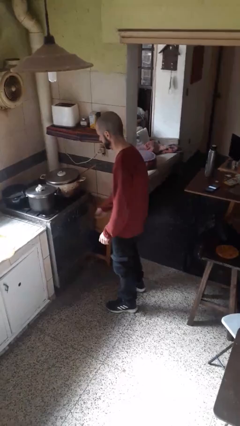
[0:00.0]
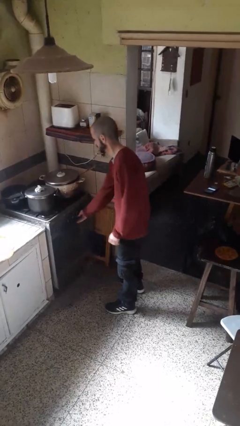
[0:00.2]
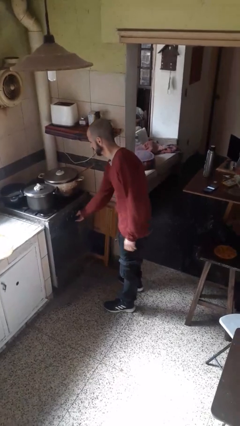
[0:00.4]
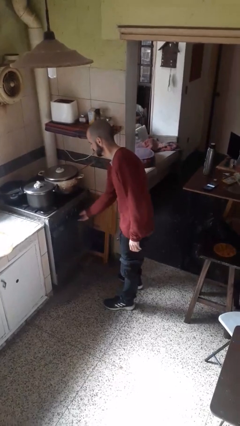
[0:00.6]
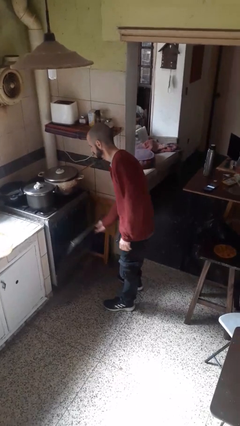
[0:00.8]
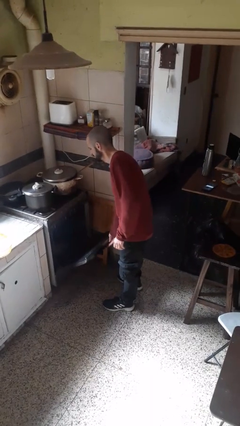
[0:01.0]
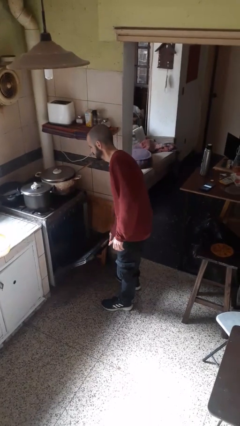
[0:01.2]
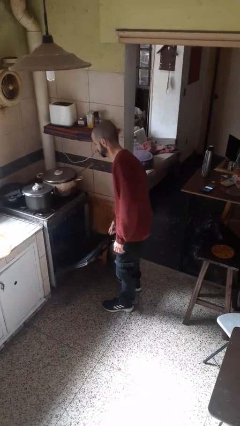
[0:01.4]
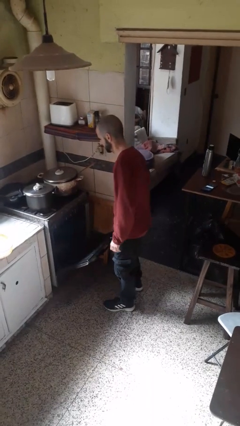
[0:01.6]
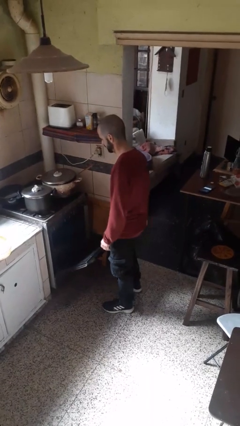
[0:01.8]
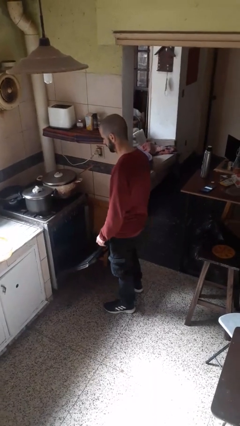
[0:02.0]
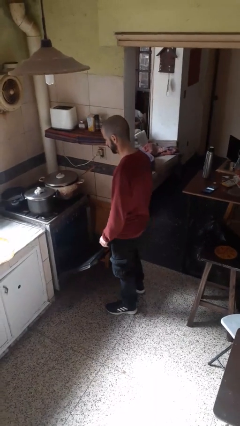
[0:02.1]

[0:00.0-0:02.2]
person opens oven door

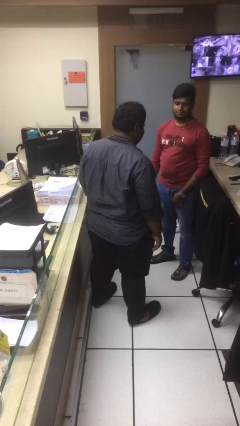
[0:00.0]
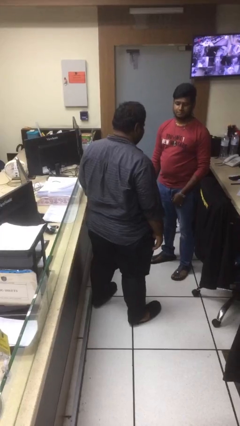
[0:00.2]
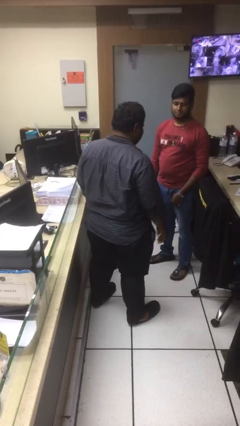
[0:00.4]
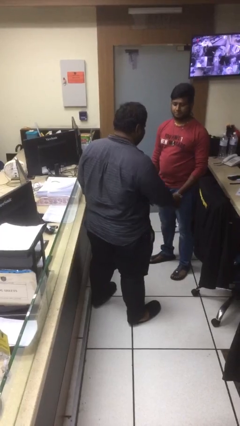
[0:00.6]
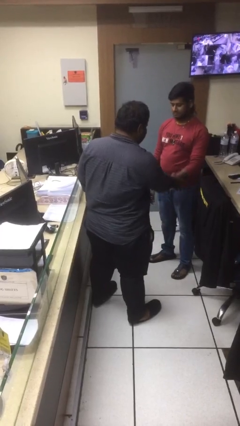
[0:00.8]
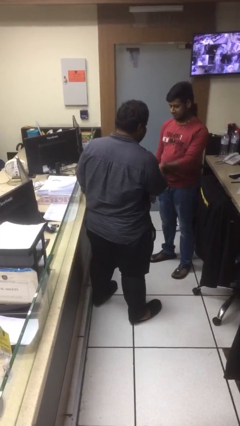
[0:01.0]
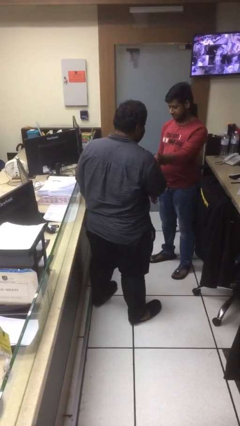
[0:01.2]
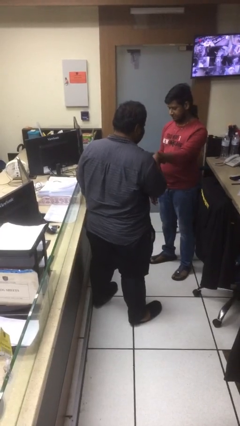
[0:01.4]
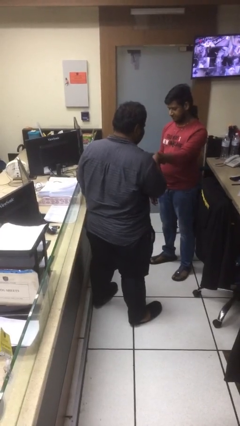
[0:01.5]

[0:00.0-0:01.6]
person grabs person by forearm

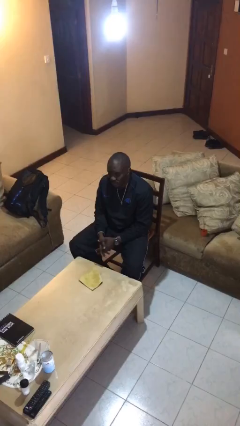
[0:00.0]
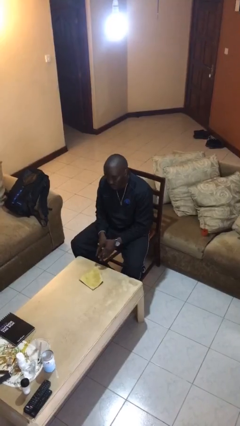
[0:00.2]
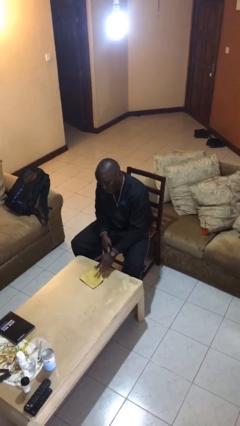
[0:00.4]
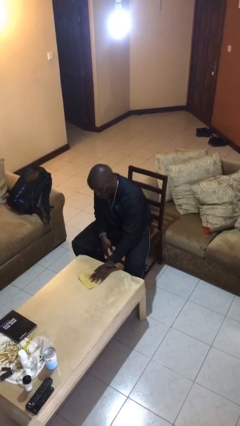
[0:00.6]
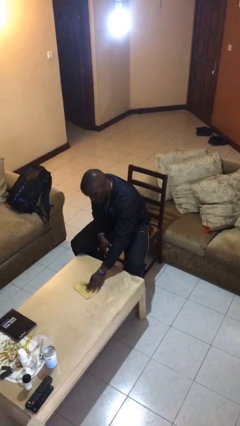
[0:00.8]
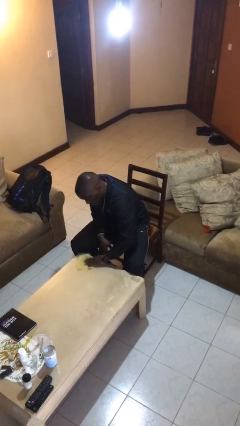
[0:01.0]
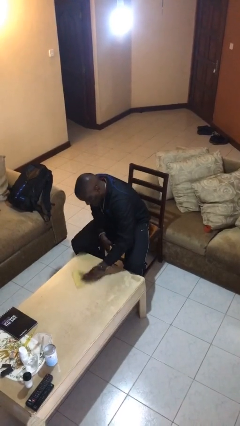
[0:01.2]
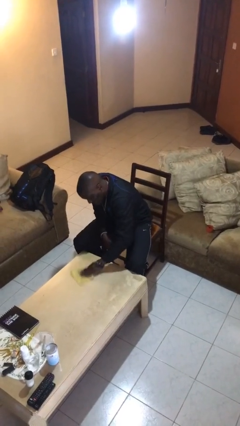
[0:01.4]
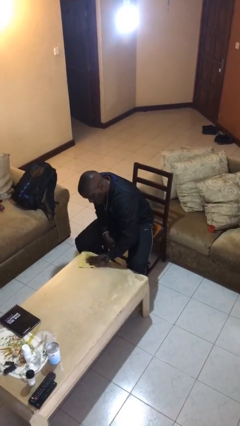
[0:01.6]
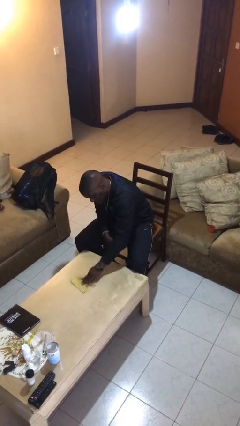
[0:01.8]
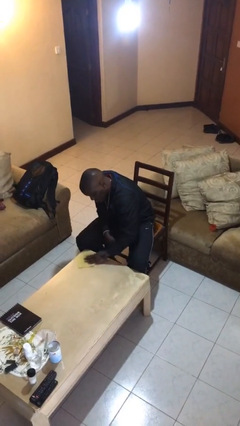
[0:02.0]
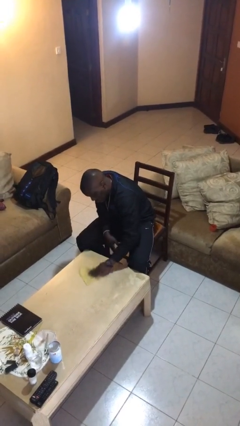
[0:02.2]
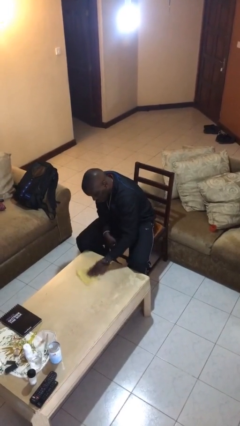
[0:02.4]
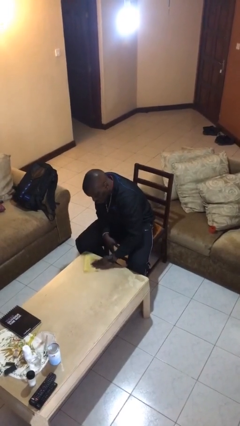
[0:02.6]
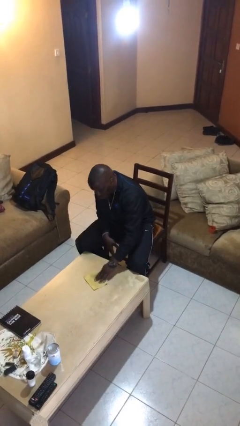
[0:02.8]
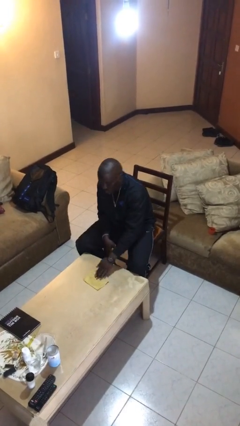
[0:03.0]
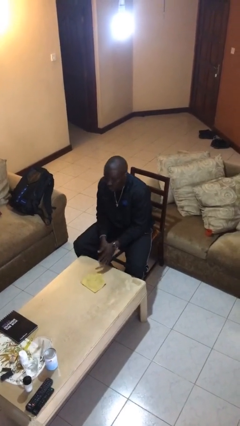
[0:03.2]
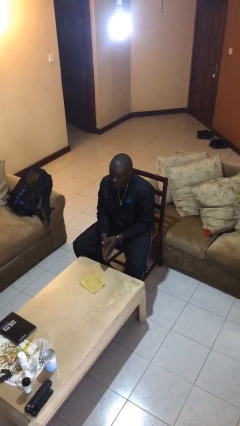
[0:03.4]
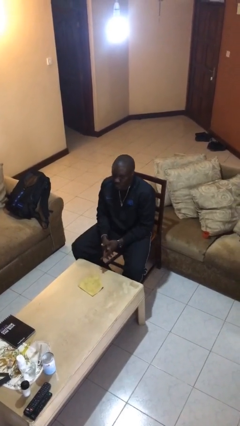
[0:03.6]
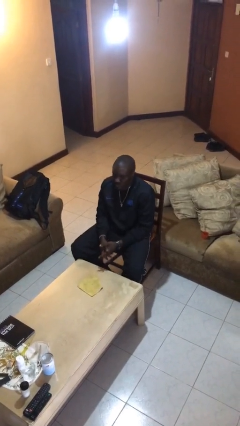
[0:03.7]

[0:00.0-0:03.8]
person cleans table with rag

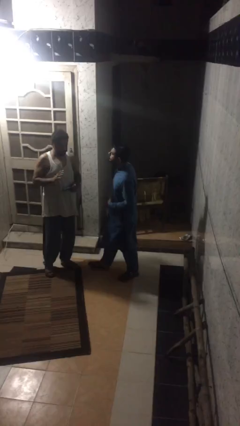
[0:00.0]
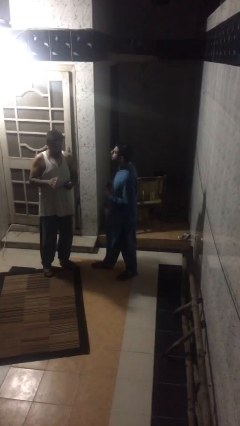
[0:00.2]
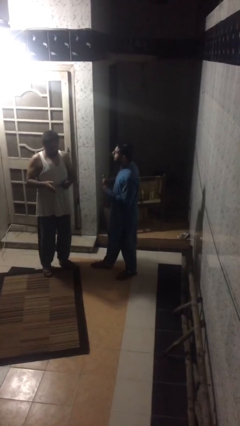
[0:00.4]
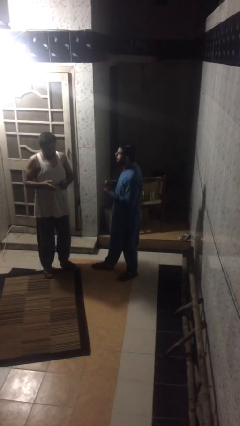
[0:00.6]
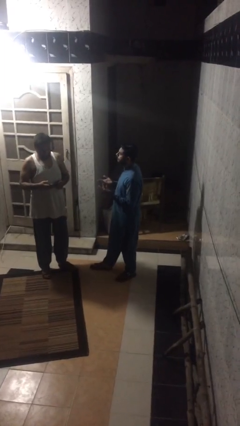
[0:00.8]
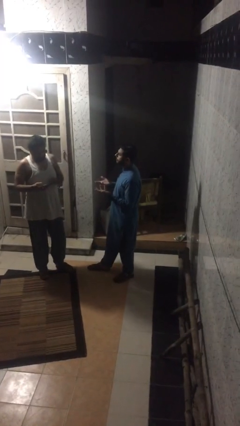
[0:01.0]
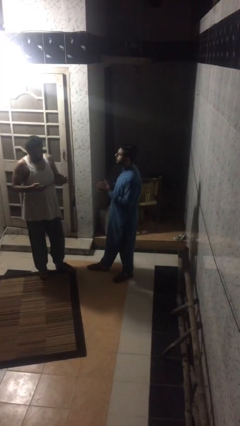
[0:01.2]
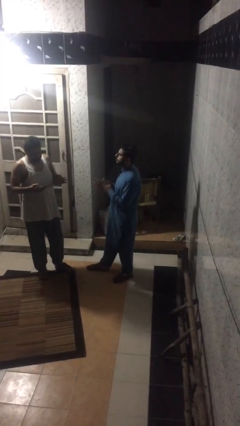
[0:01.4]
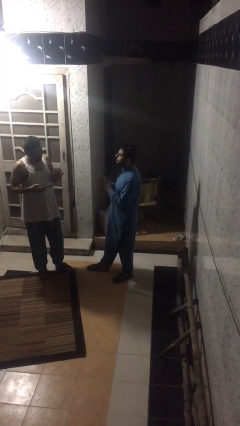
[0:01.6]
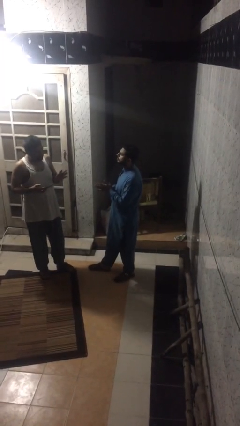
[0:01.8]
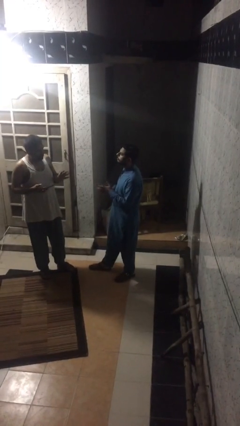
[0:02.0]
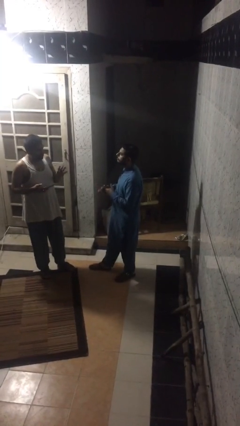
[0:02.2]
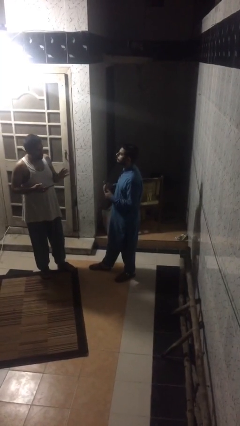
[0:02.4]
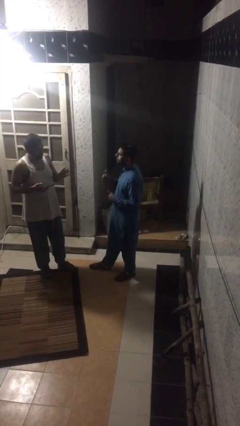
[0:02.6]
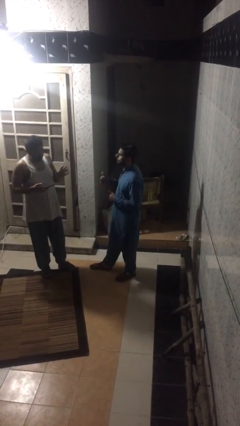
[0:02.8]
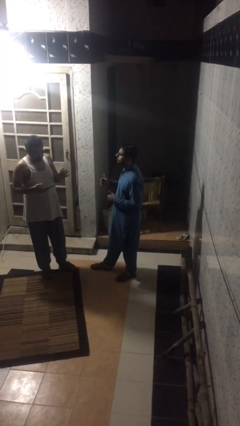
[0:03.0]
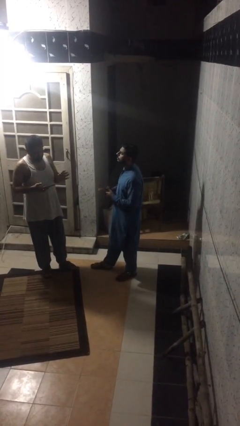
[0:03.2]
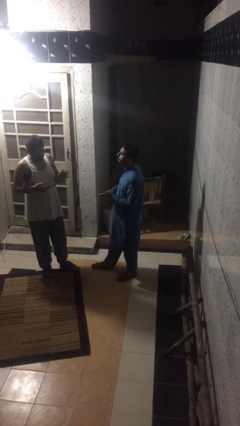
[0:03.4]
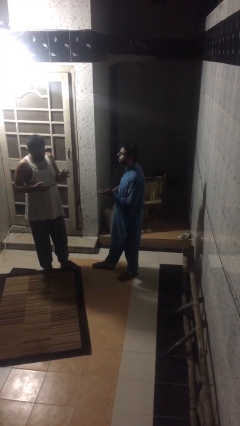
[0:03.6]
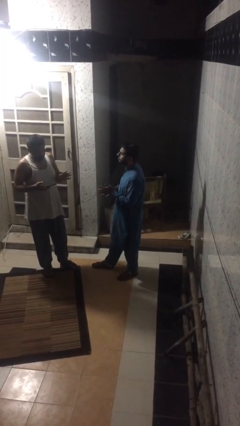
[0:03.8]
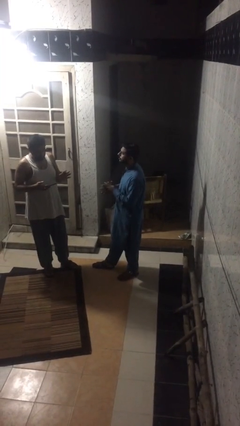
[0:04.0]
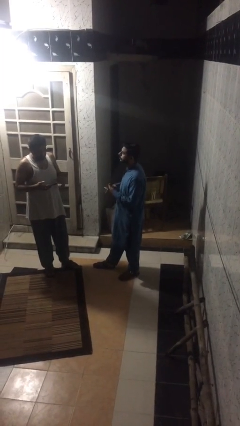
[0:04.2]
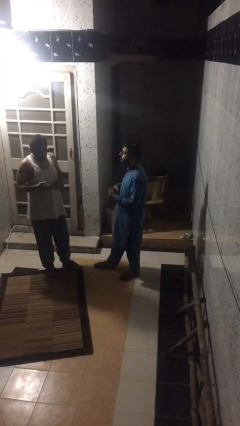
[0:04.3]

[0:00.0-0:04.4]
person talks to person

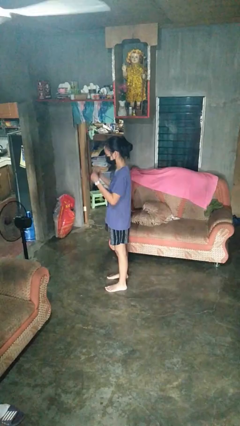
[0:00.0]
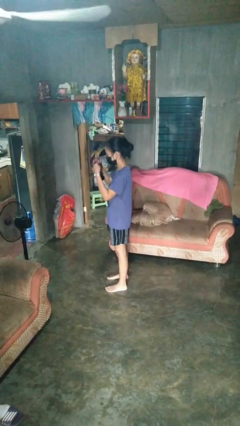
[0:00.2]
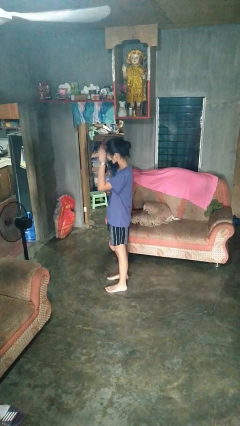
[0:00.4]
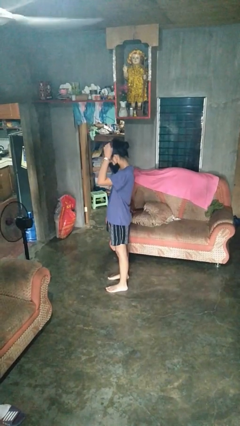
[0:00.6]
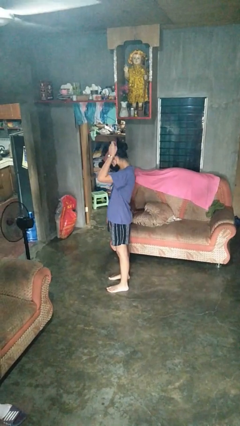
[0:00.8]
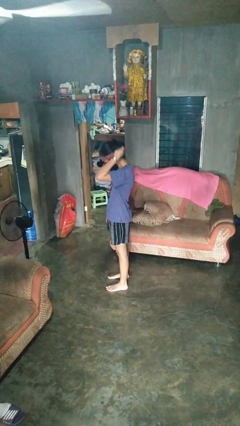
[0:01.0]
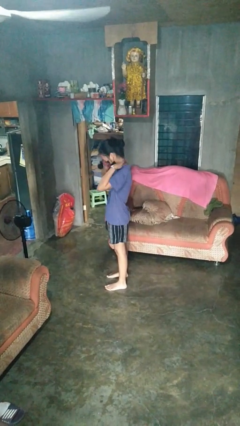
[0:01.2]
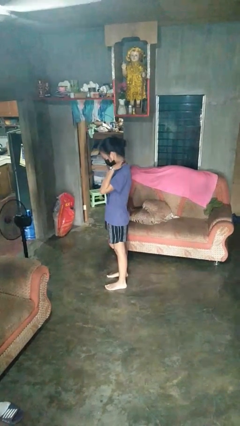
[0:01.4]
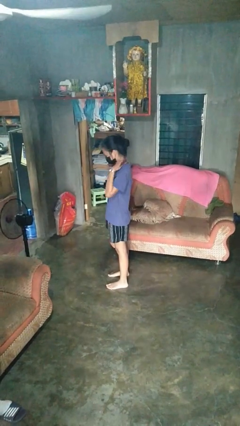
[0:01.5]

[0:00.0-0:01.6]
person puts on necklace

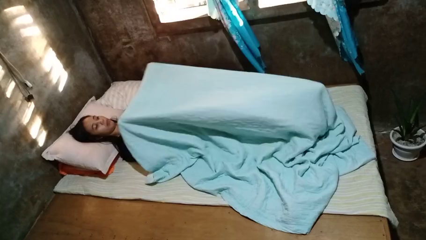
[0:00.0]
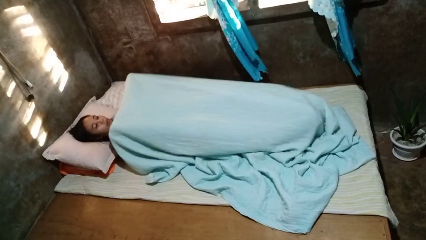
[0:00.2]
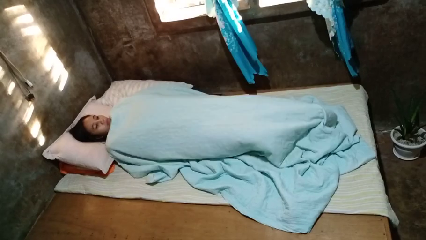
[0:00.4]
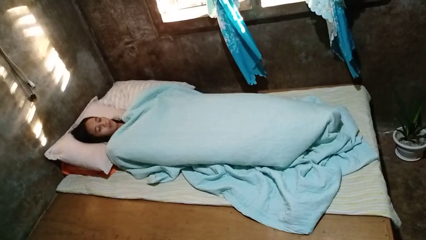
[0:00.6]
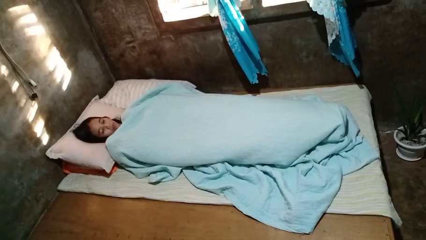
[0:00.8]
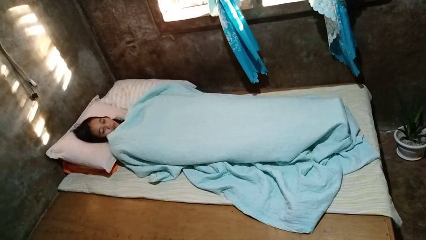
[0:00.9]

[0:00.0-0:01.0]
person covers with bedsheets

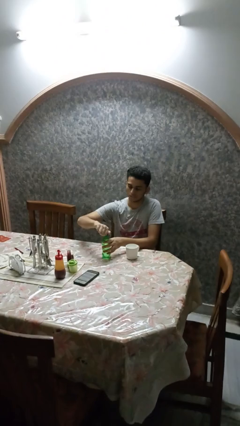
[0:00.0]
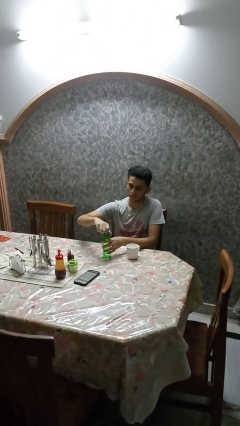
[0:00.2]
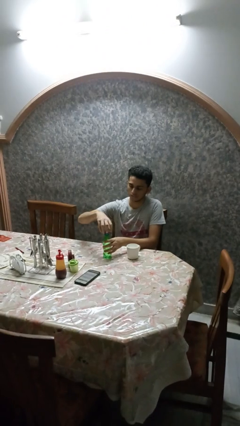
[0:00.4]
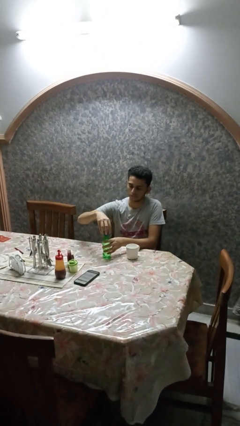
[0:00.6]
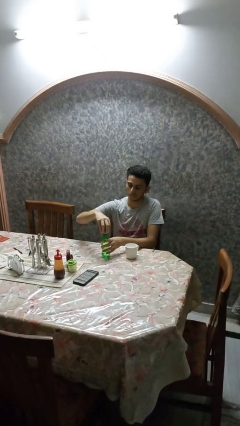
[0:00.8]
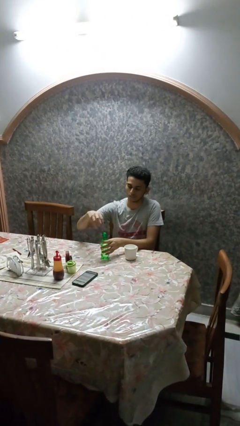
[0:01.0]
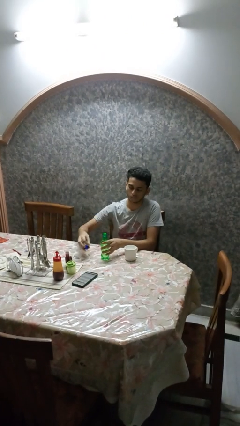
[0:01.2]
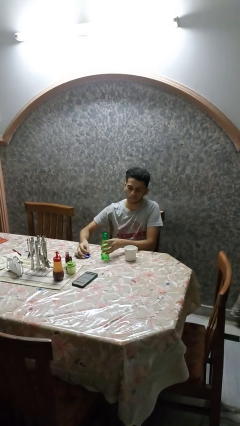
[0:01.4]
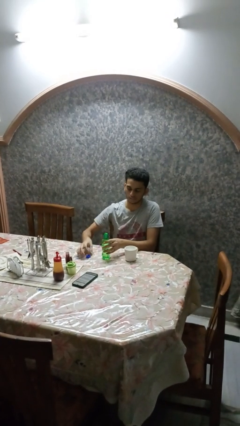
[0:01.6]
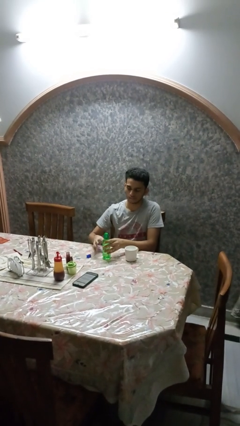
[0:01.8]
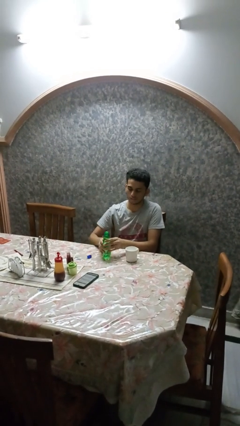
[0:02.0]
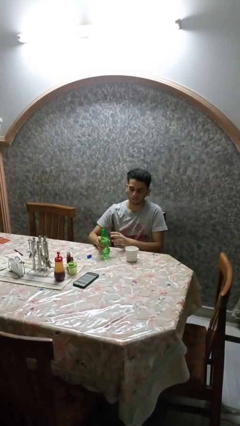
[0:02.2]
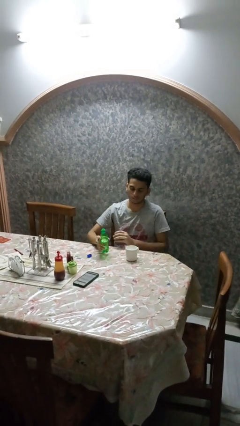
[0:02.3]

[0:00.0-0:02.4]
person unscrews lid from bottle
